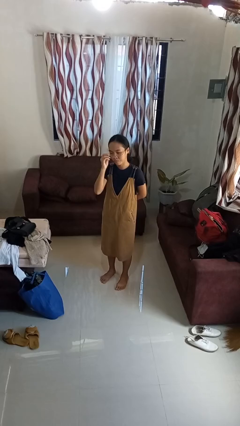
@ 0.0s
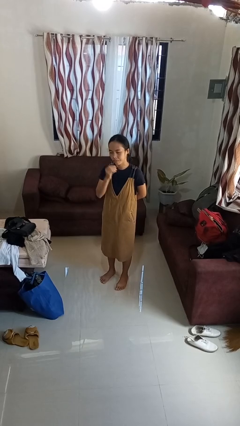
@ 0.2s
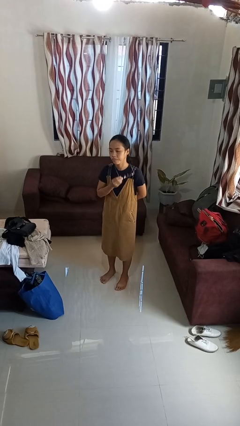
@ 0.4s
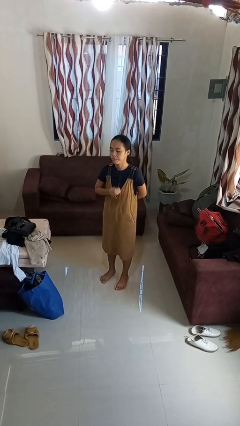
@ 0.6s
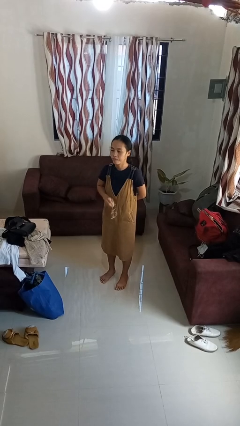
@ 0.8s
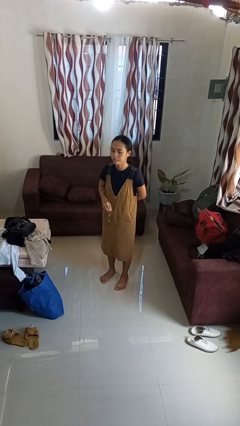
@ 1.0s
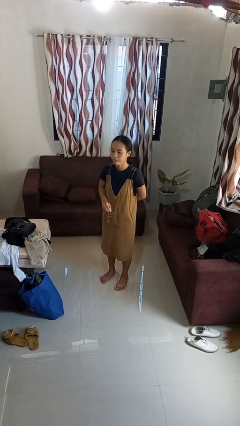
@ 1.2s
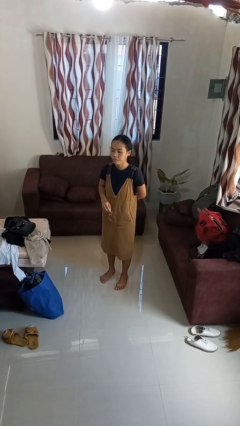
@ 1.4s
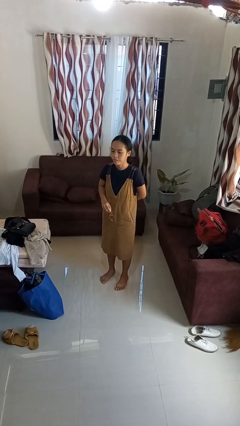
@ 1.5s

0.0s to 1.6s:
person takes off glasses

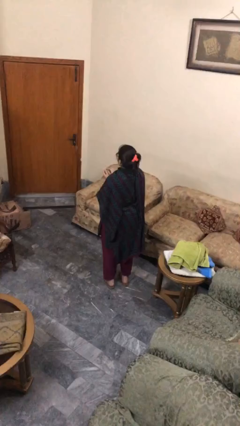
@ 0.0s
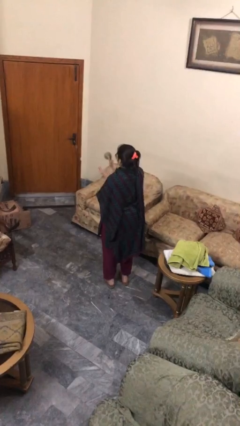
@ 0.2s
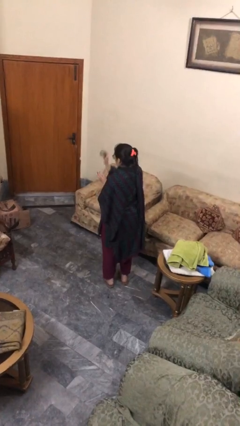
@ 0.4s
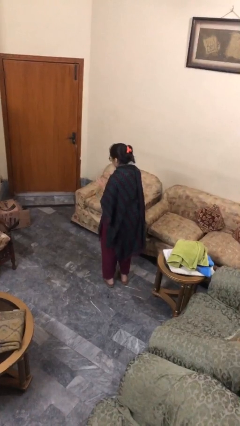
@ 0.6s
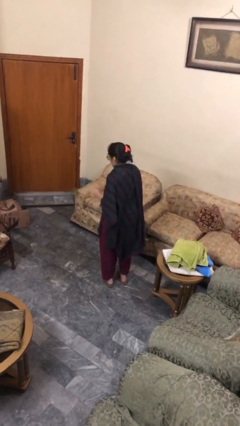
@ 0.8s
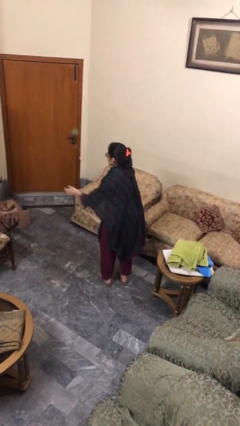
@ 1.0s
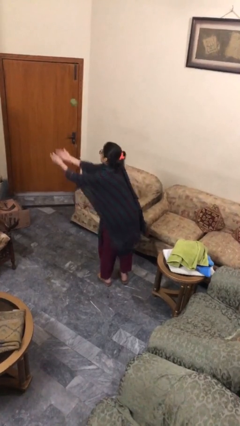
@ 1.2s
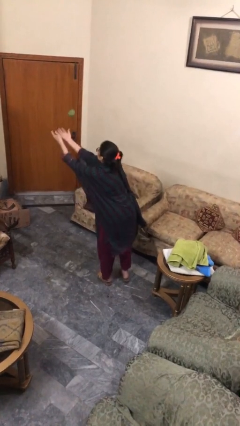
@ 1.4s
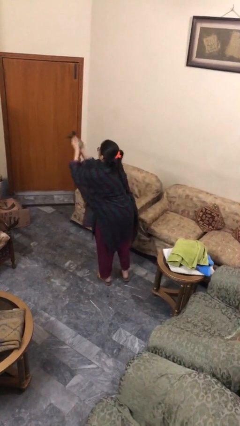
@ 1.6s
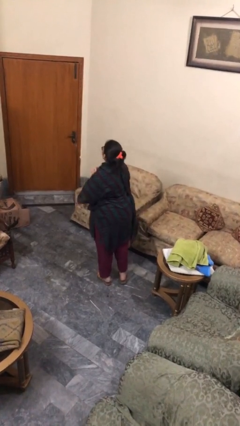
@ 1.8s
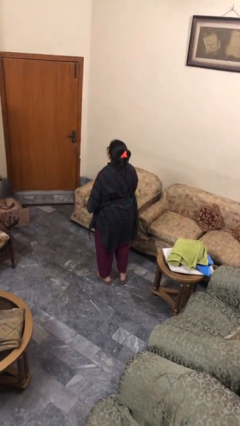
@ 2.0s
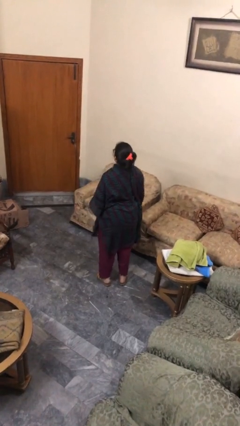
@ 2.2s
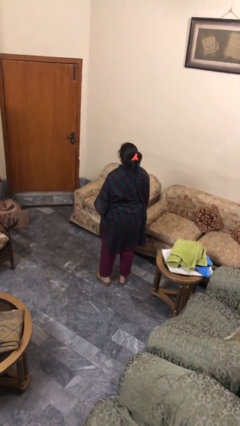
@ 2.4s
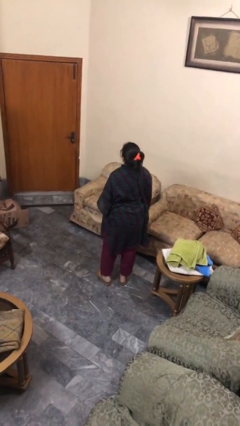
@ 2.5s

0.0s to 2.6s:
person bounces ball on floor

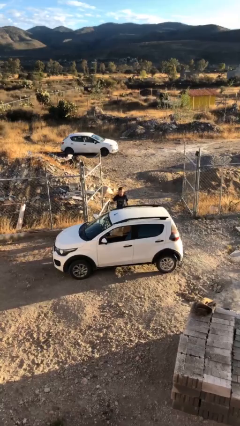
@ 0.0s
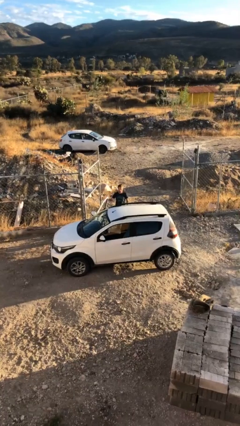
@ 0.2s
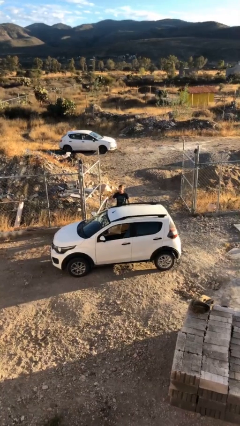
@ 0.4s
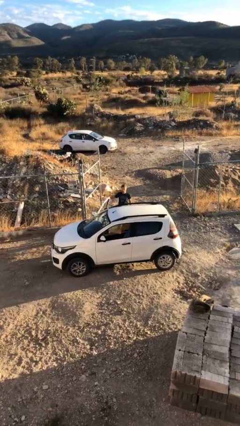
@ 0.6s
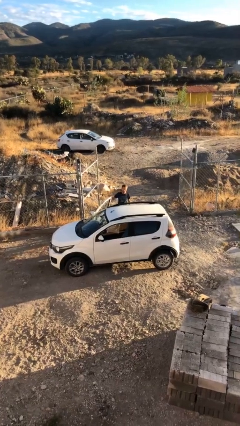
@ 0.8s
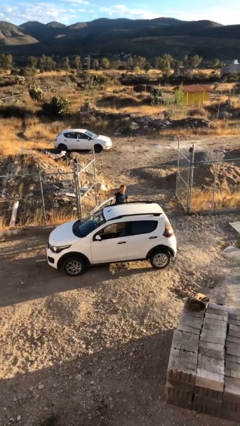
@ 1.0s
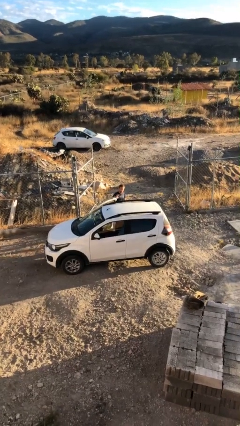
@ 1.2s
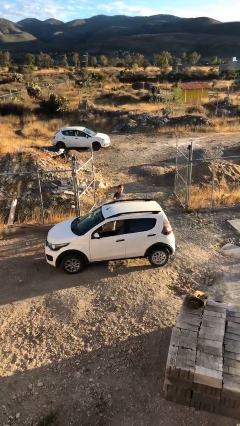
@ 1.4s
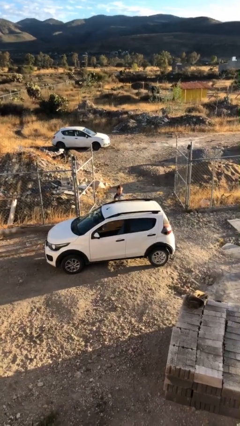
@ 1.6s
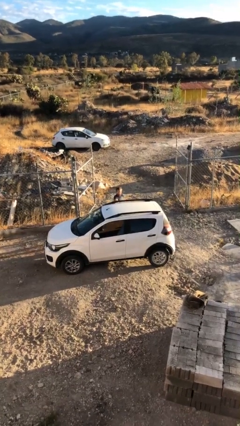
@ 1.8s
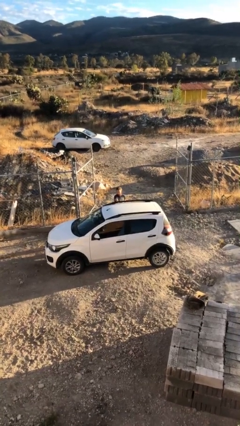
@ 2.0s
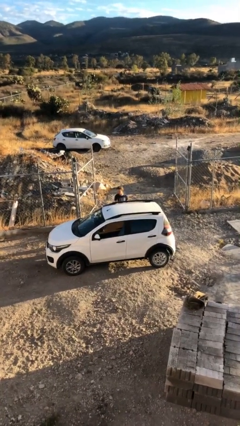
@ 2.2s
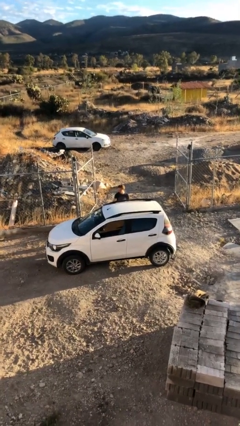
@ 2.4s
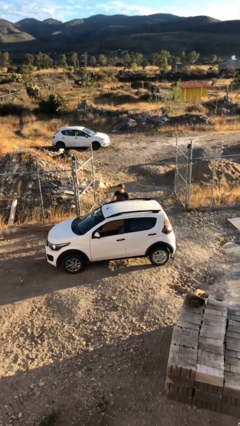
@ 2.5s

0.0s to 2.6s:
person closes car door

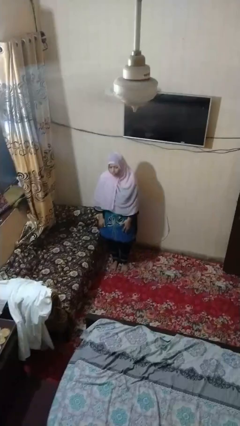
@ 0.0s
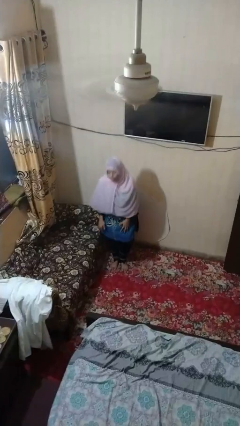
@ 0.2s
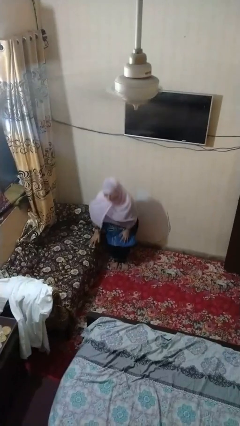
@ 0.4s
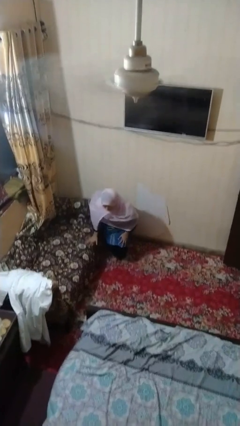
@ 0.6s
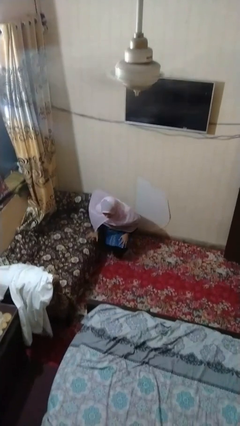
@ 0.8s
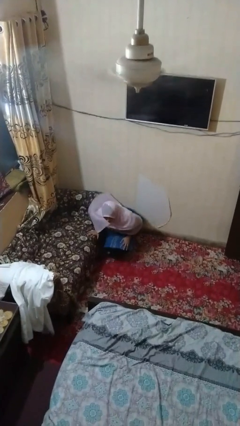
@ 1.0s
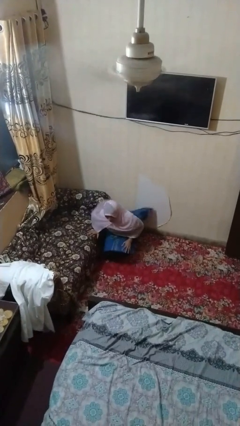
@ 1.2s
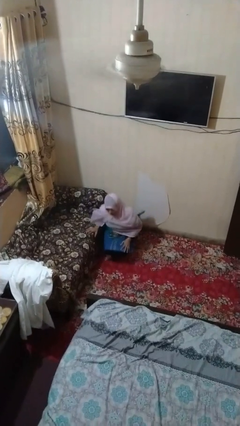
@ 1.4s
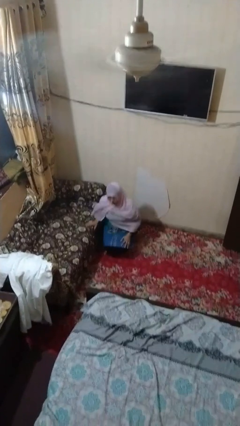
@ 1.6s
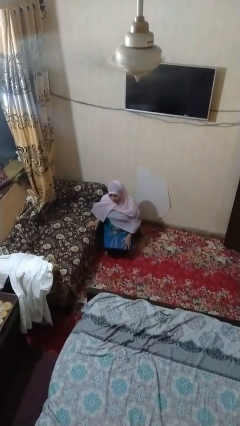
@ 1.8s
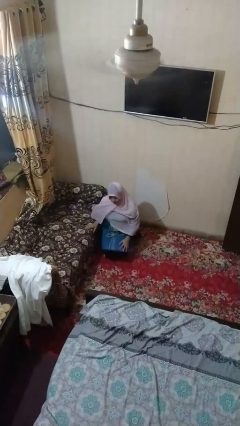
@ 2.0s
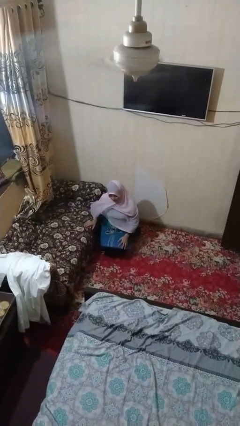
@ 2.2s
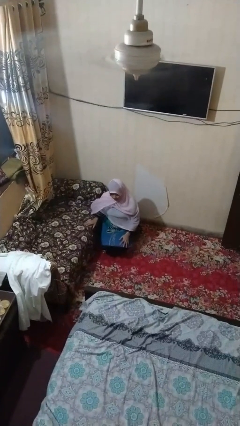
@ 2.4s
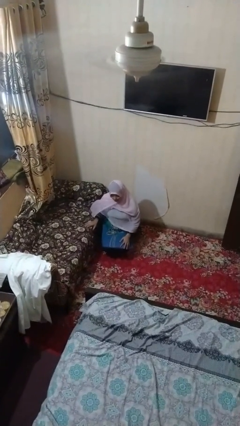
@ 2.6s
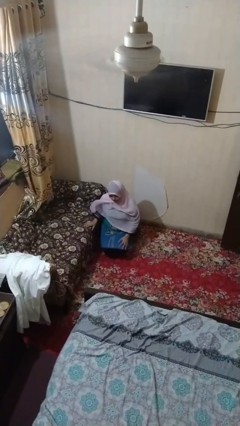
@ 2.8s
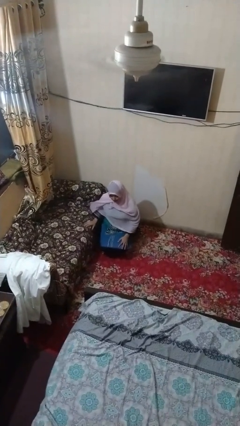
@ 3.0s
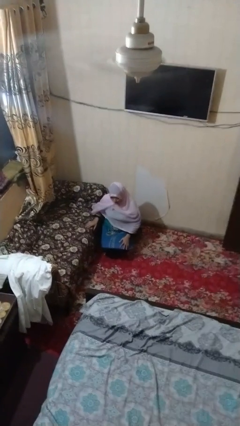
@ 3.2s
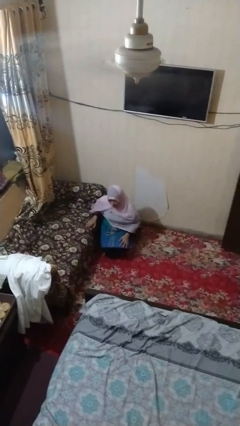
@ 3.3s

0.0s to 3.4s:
person squats

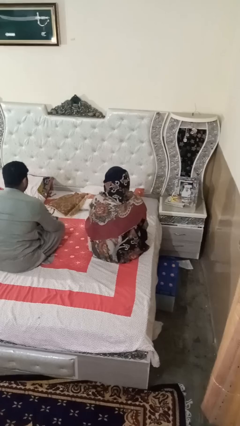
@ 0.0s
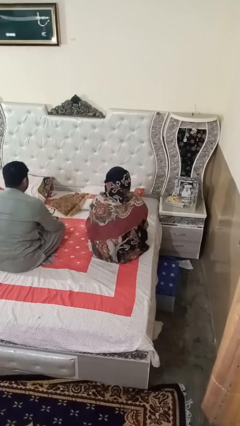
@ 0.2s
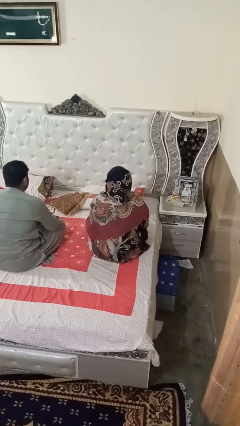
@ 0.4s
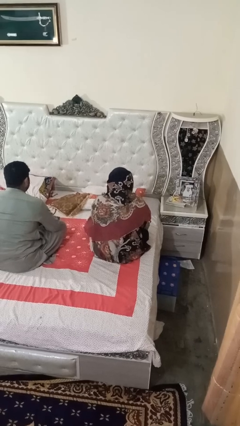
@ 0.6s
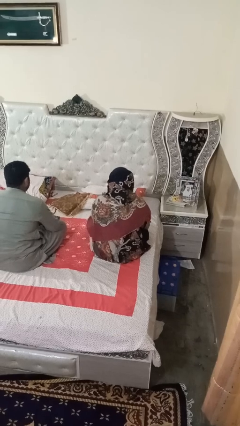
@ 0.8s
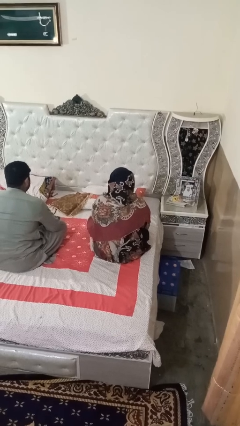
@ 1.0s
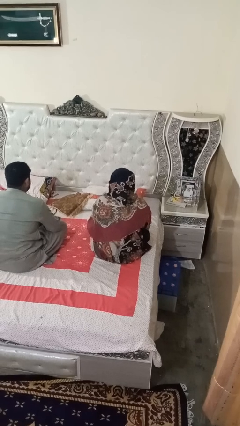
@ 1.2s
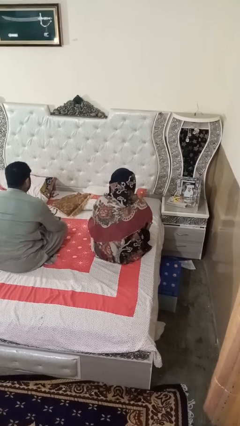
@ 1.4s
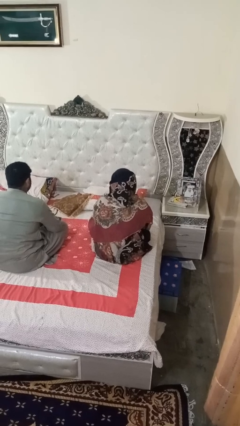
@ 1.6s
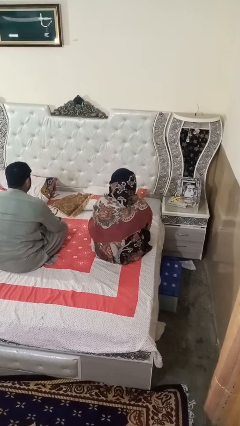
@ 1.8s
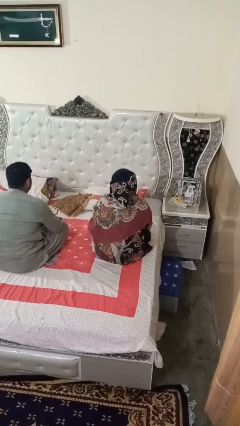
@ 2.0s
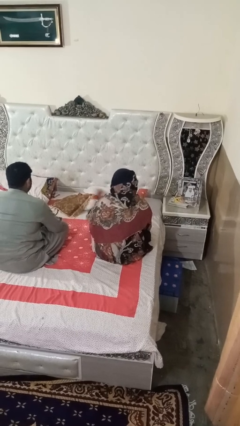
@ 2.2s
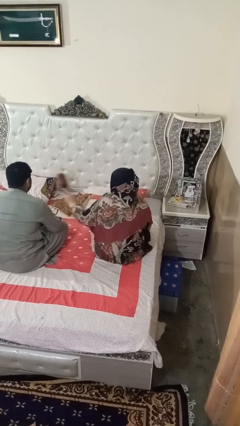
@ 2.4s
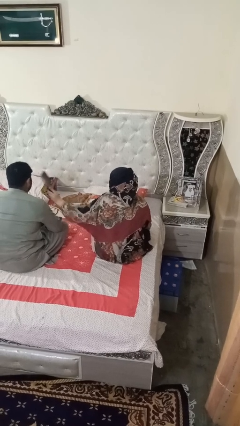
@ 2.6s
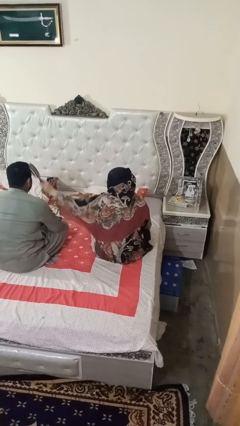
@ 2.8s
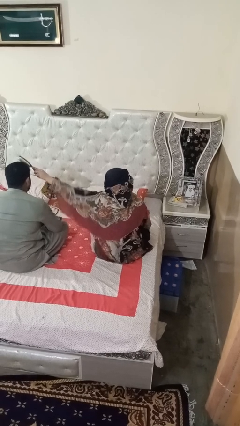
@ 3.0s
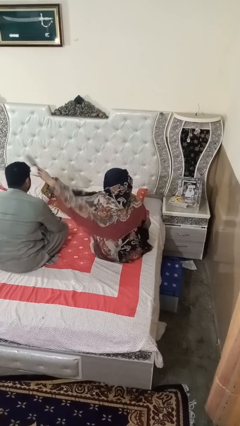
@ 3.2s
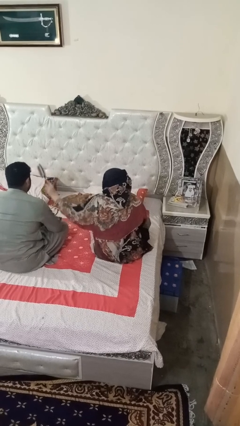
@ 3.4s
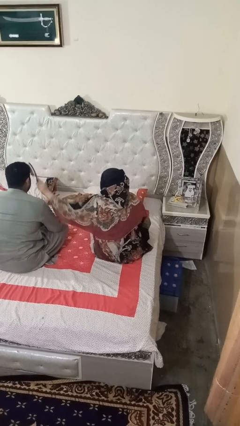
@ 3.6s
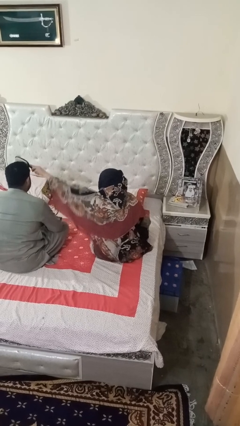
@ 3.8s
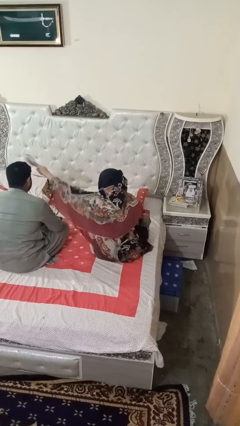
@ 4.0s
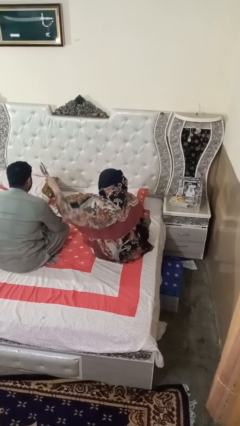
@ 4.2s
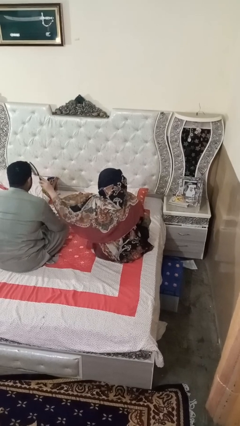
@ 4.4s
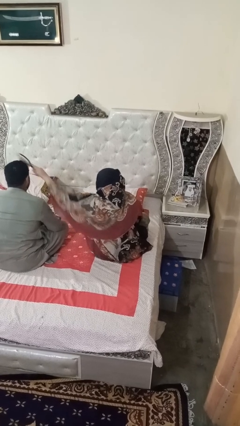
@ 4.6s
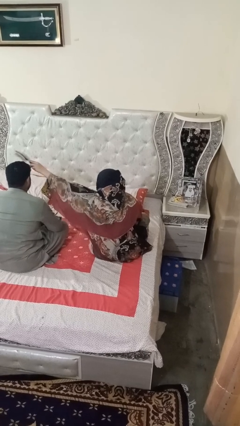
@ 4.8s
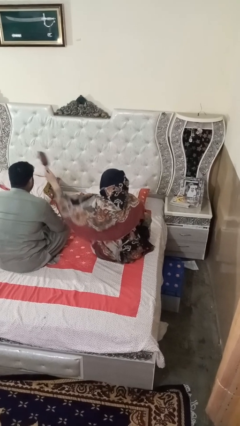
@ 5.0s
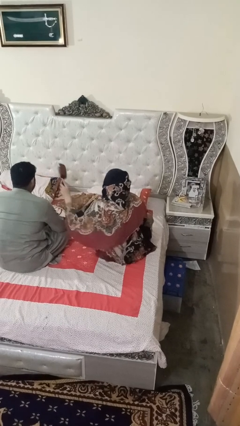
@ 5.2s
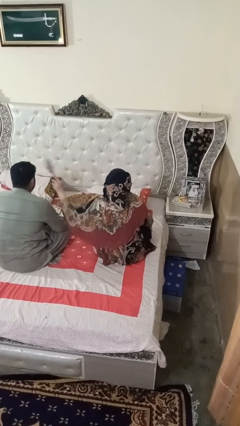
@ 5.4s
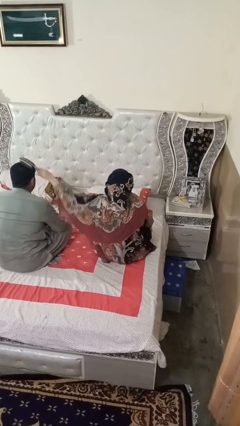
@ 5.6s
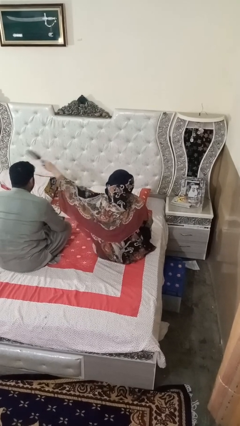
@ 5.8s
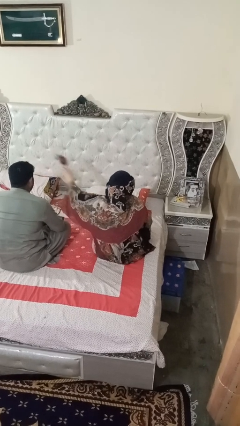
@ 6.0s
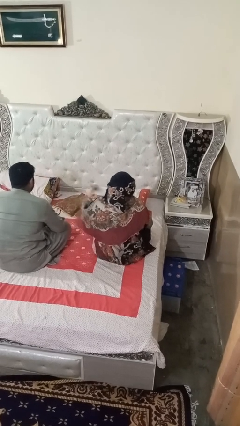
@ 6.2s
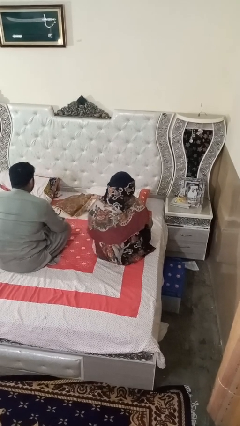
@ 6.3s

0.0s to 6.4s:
person brushes hair of person

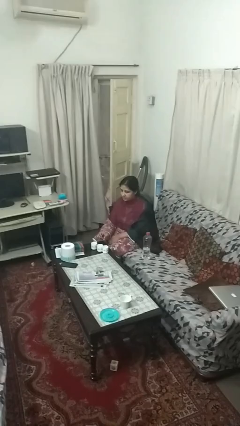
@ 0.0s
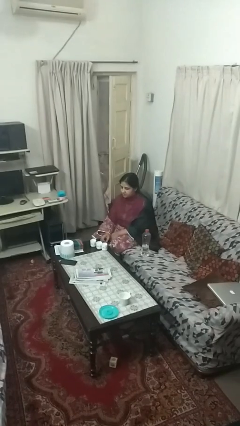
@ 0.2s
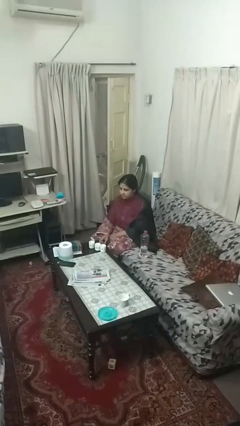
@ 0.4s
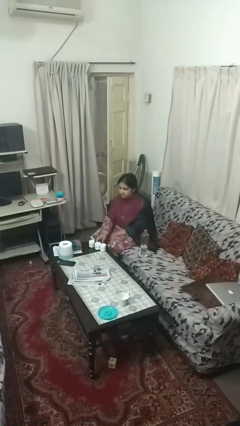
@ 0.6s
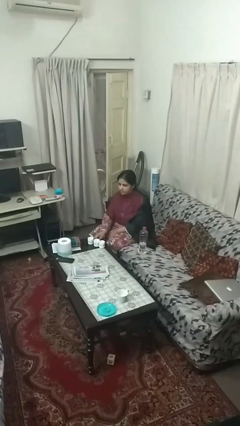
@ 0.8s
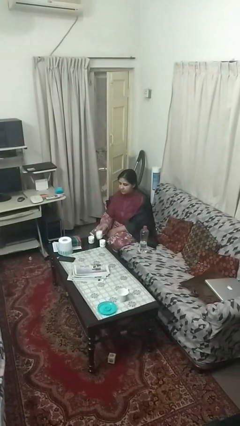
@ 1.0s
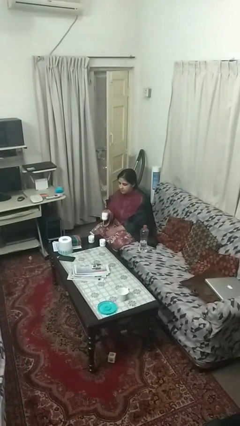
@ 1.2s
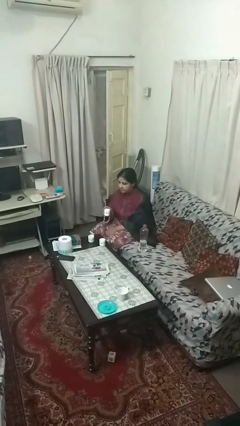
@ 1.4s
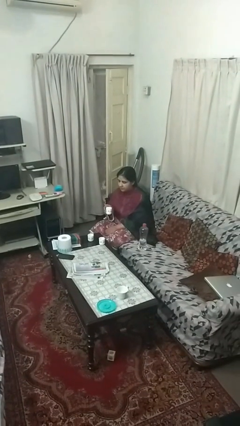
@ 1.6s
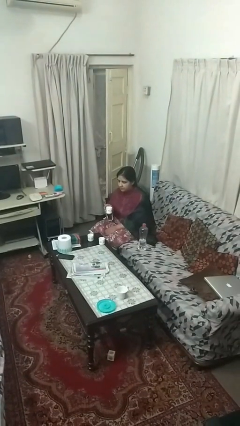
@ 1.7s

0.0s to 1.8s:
person picks up object from table
